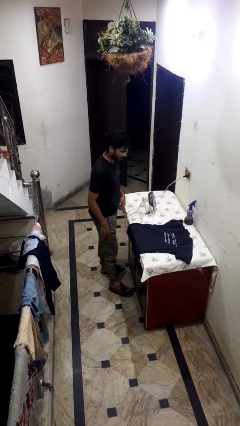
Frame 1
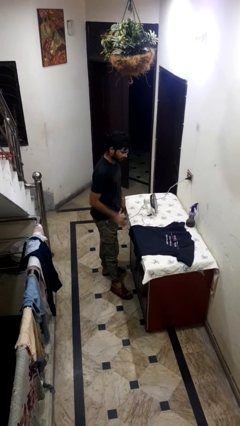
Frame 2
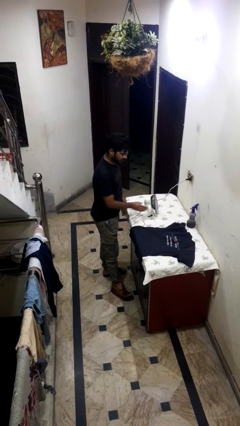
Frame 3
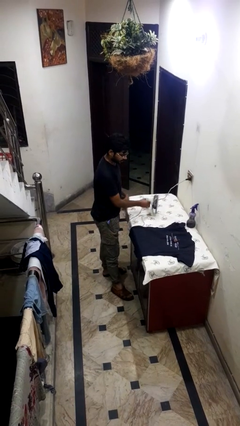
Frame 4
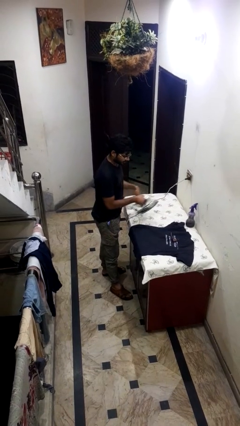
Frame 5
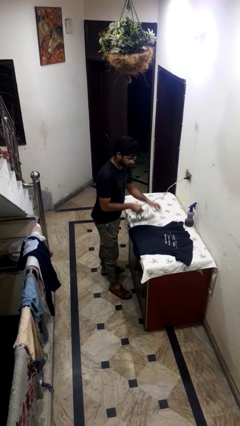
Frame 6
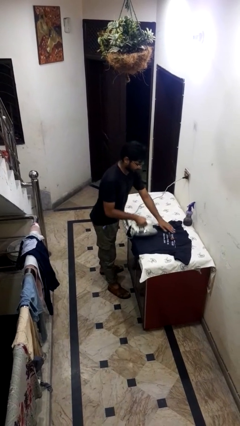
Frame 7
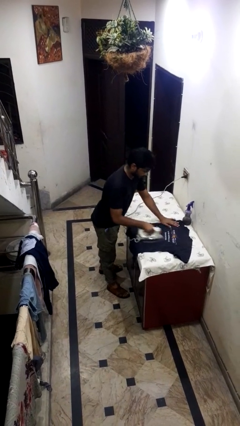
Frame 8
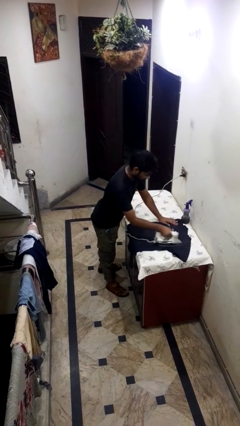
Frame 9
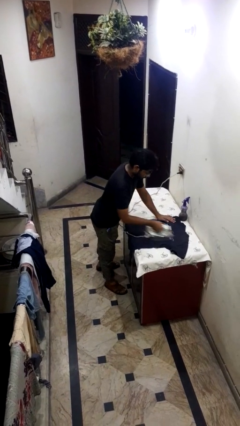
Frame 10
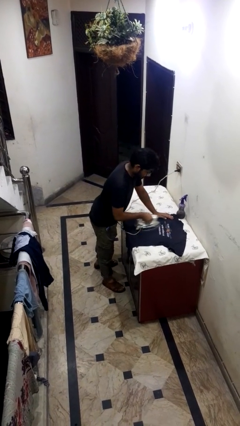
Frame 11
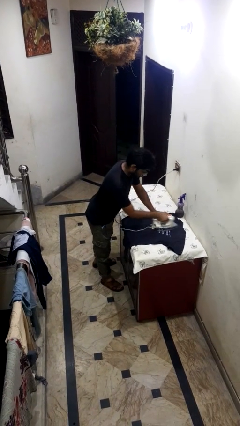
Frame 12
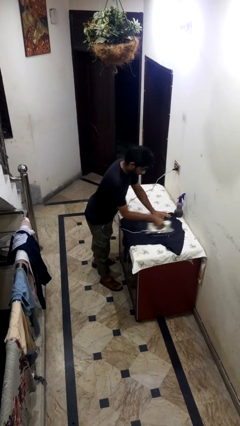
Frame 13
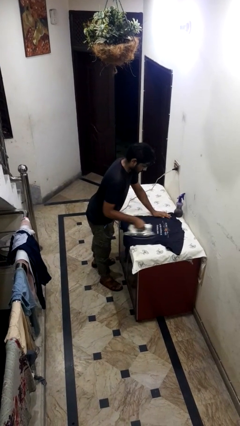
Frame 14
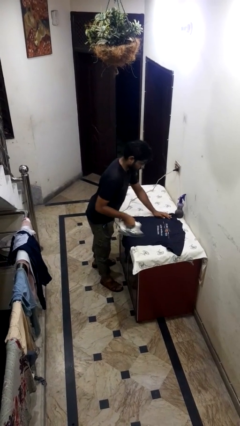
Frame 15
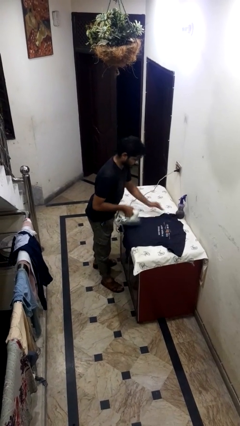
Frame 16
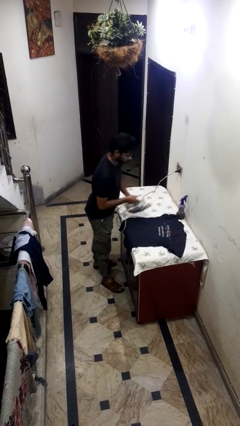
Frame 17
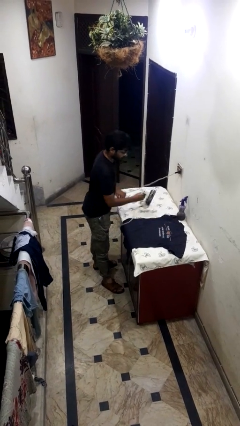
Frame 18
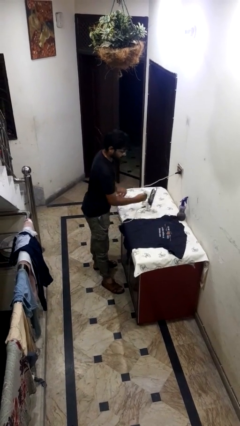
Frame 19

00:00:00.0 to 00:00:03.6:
person irons clothes

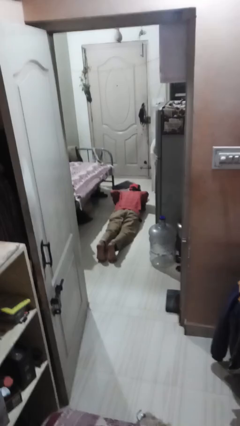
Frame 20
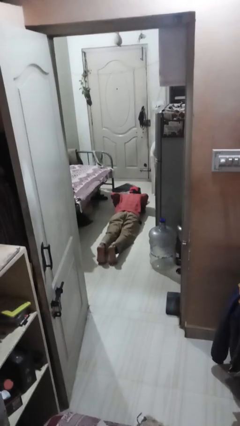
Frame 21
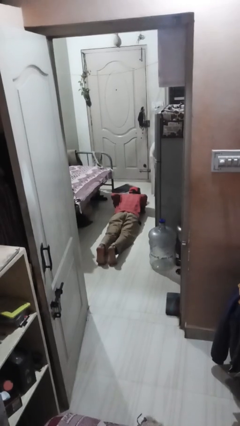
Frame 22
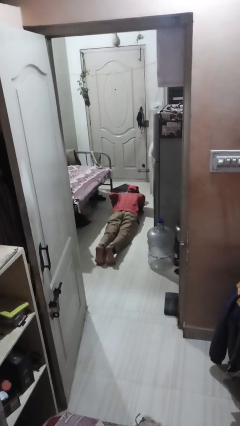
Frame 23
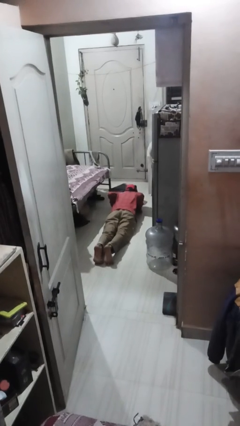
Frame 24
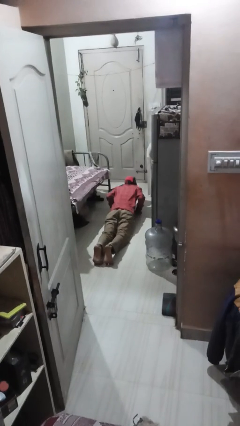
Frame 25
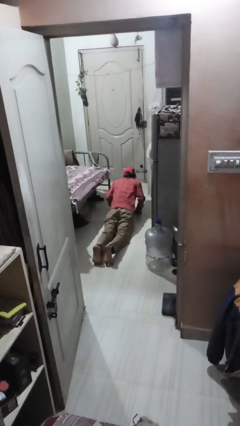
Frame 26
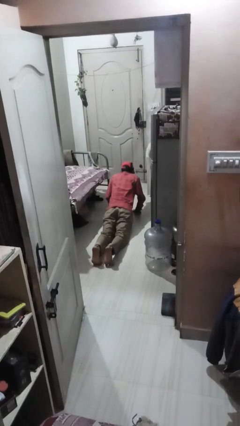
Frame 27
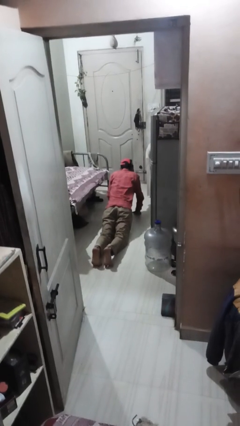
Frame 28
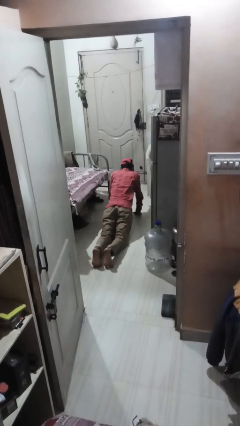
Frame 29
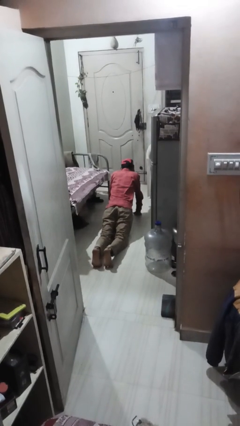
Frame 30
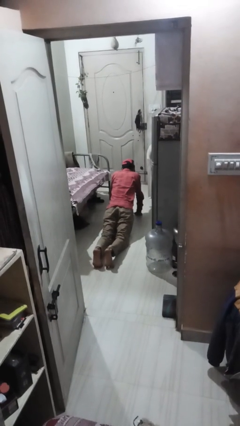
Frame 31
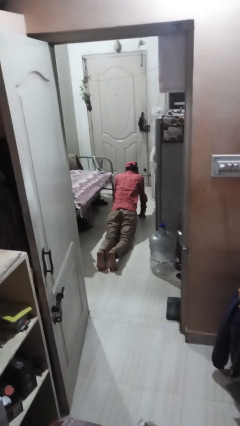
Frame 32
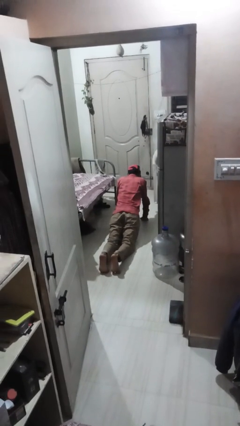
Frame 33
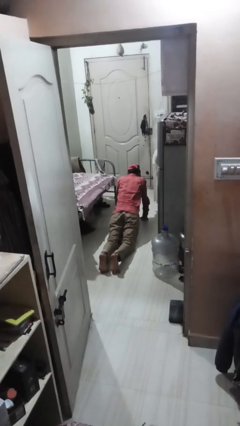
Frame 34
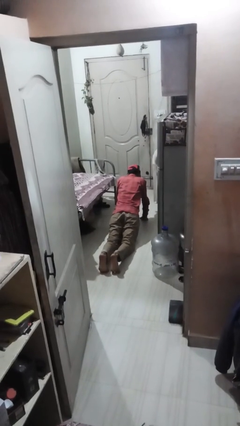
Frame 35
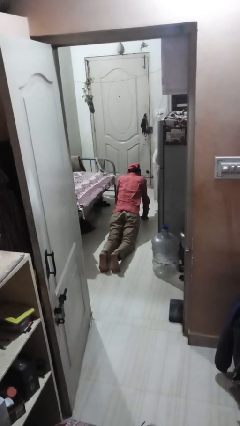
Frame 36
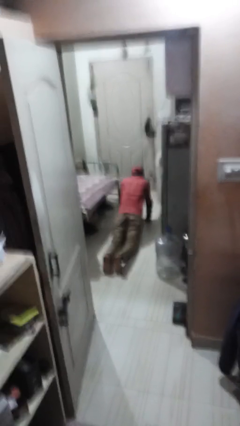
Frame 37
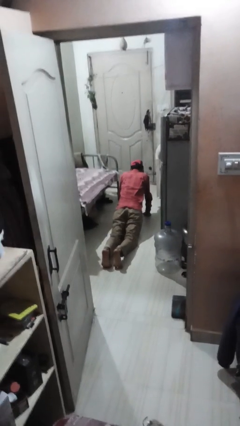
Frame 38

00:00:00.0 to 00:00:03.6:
person exercises with pushup

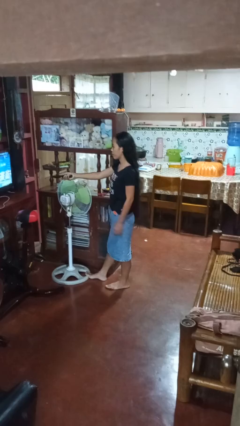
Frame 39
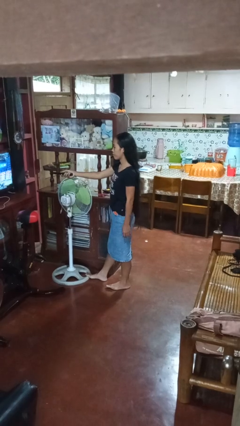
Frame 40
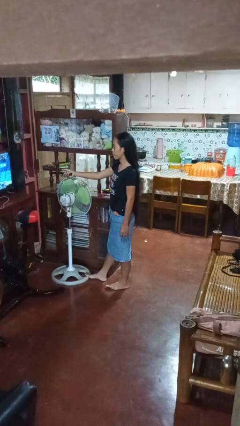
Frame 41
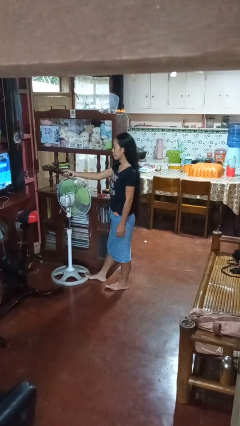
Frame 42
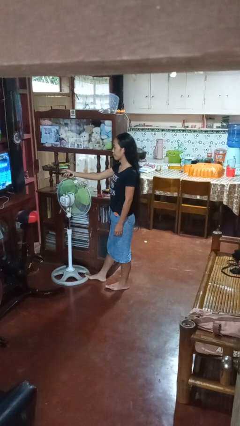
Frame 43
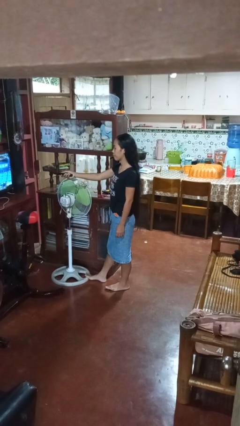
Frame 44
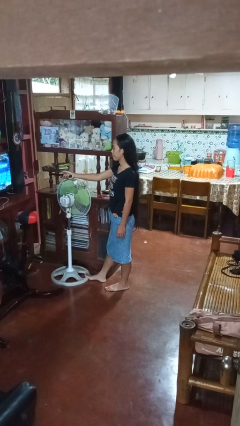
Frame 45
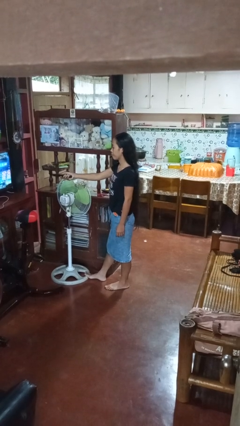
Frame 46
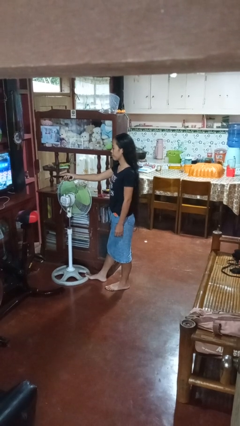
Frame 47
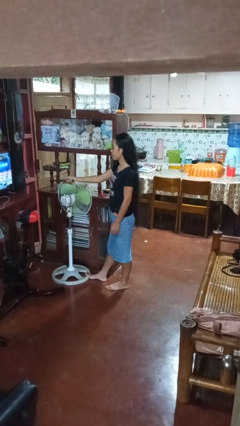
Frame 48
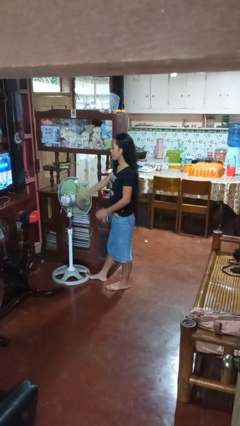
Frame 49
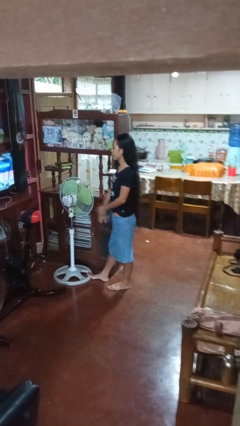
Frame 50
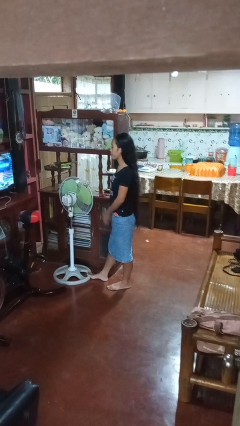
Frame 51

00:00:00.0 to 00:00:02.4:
person uses television remote

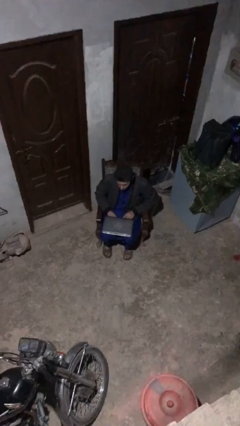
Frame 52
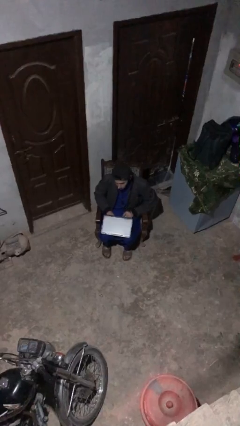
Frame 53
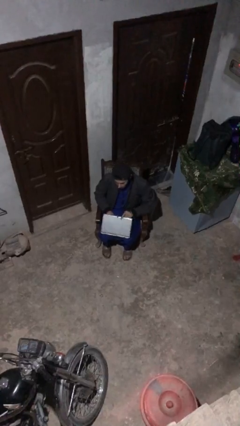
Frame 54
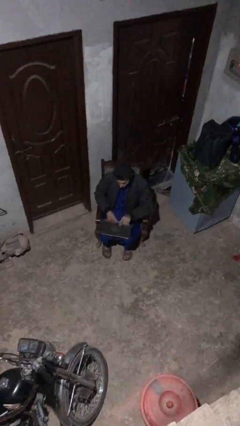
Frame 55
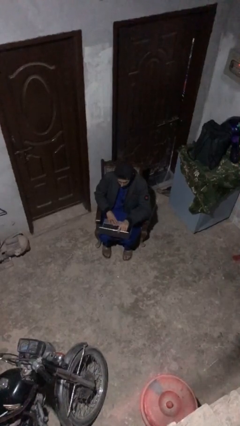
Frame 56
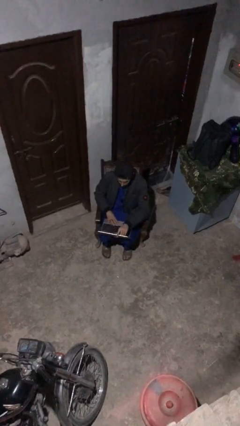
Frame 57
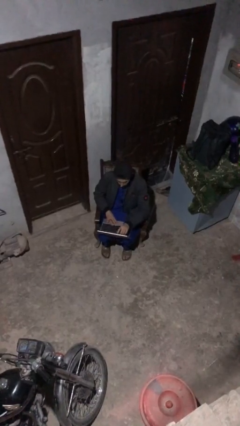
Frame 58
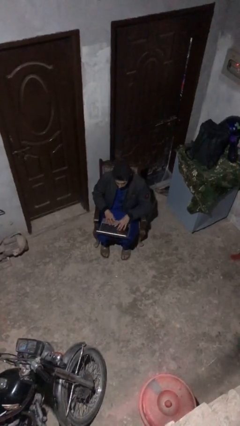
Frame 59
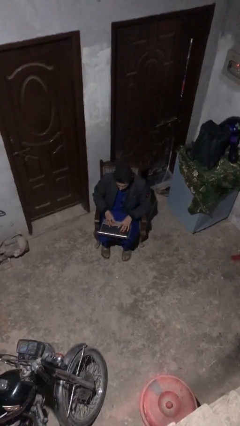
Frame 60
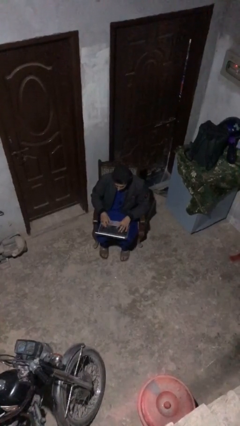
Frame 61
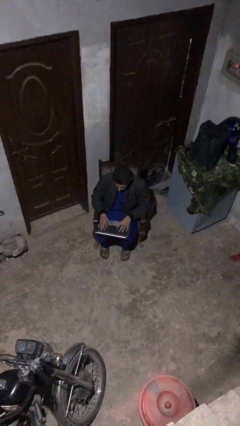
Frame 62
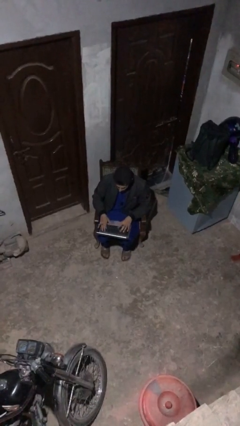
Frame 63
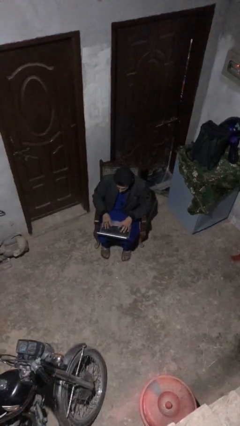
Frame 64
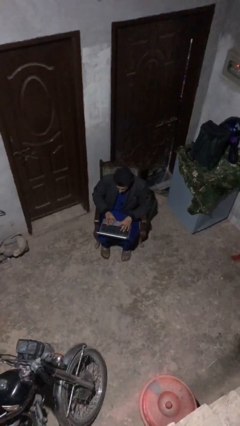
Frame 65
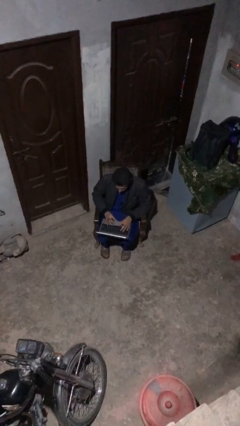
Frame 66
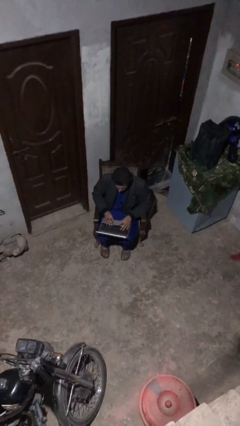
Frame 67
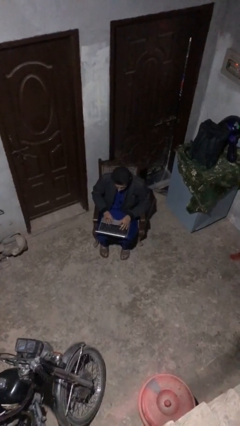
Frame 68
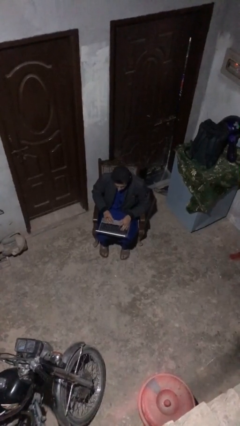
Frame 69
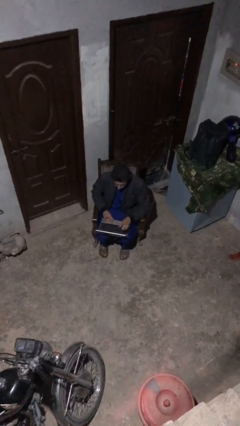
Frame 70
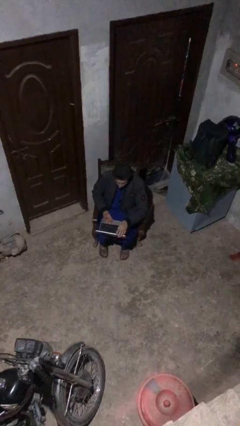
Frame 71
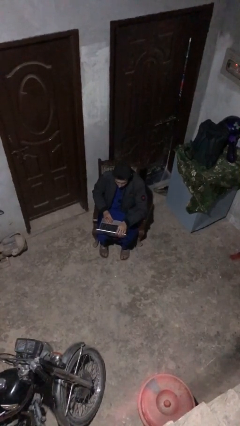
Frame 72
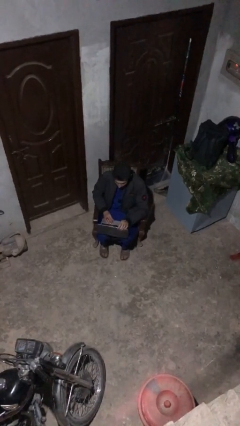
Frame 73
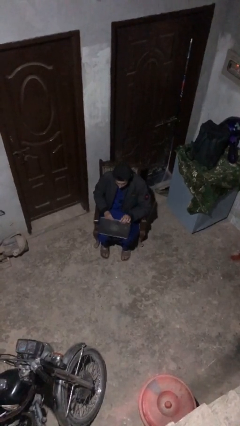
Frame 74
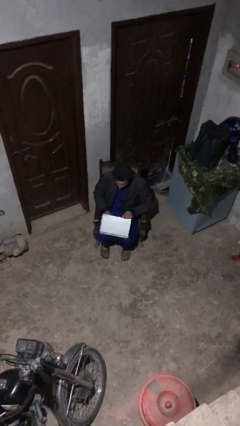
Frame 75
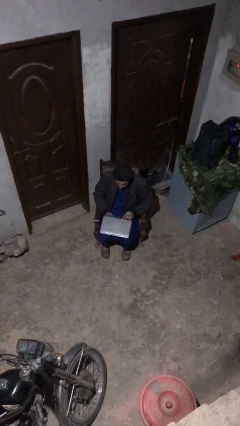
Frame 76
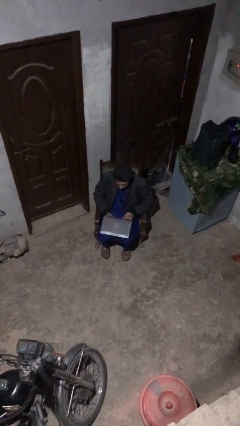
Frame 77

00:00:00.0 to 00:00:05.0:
person interacts with laptop

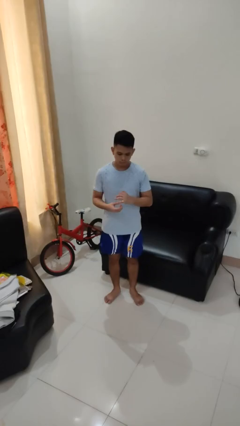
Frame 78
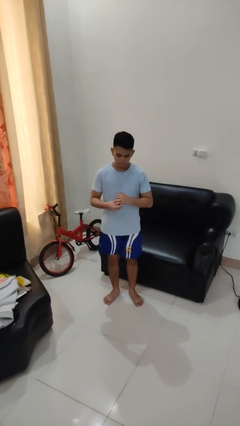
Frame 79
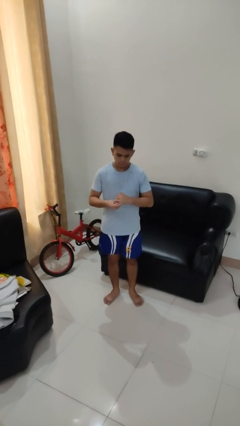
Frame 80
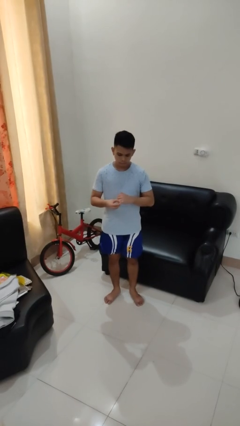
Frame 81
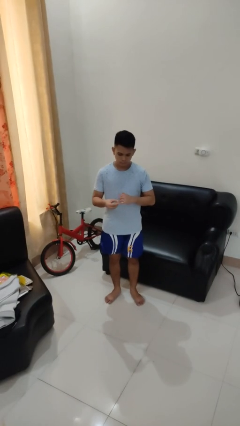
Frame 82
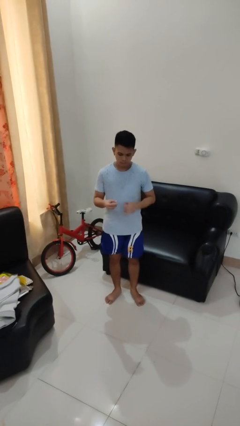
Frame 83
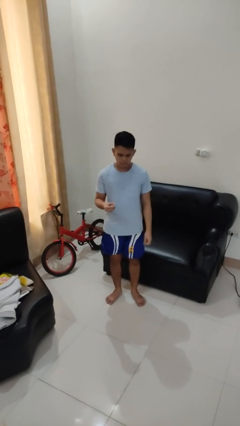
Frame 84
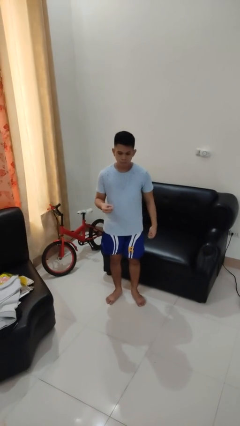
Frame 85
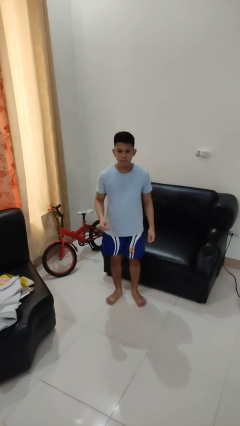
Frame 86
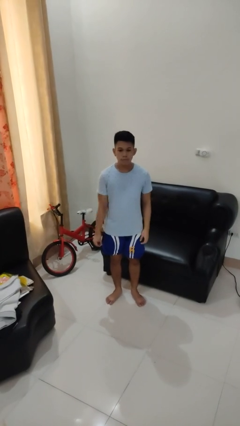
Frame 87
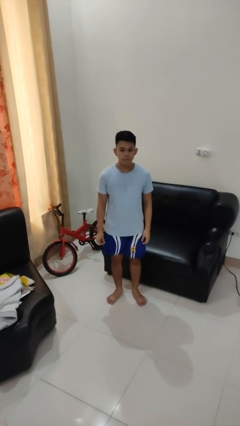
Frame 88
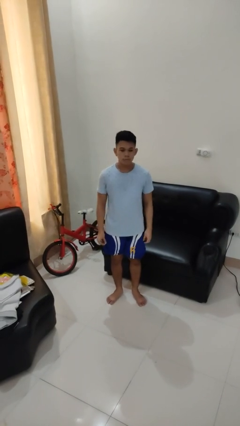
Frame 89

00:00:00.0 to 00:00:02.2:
person takes off ring

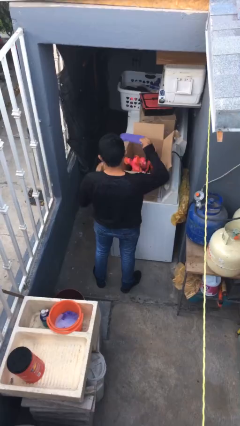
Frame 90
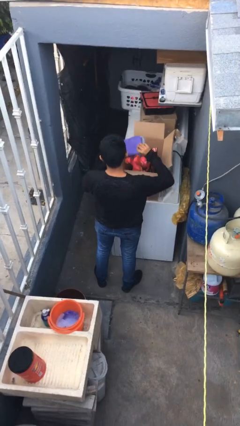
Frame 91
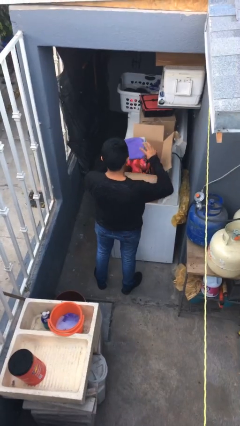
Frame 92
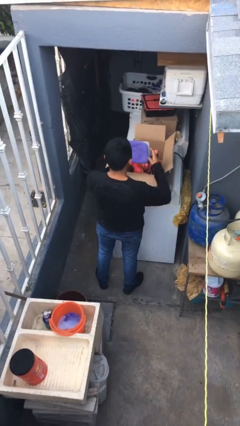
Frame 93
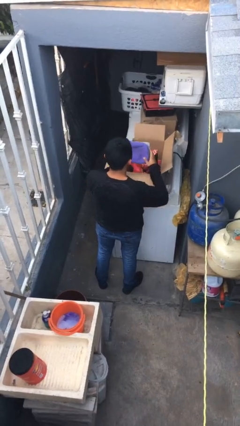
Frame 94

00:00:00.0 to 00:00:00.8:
person takes object from box
